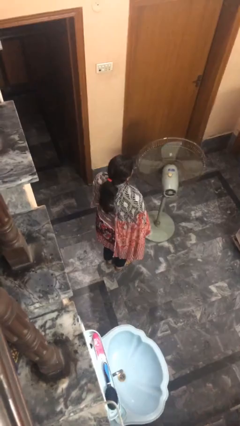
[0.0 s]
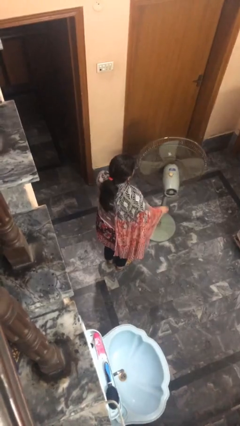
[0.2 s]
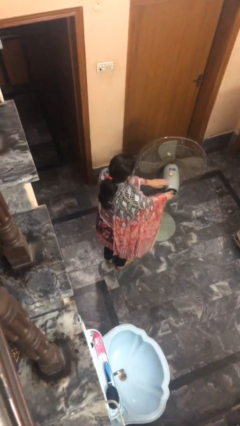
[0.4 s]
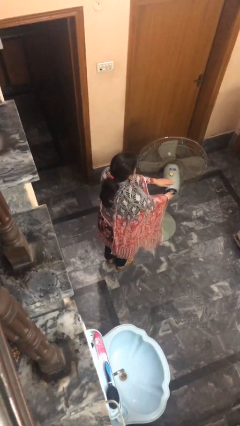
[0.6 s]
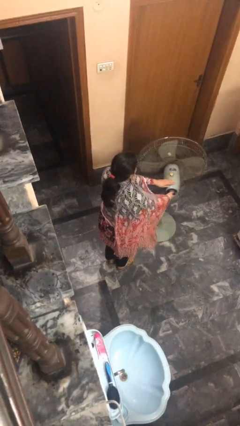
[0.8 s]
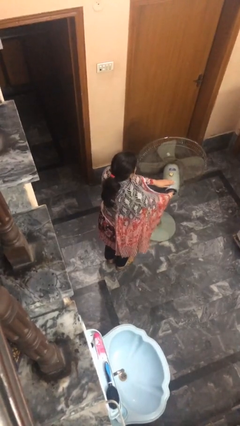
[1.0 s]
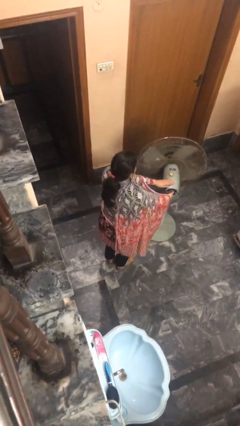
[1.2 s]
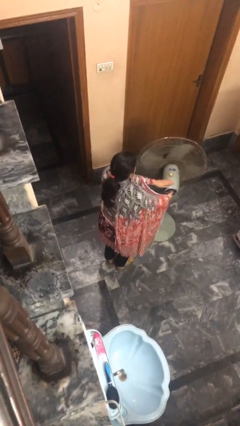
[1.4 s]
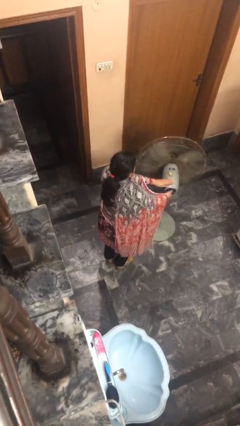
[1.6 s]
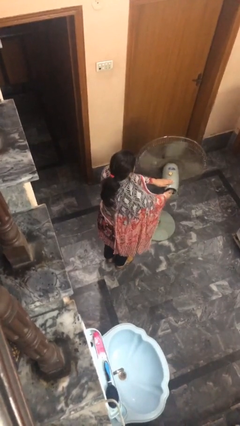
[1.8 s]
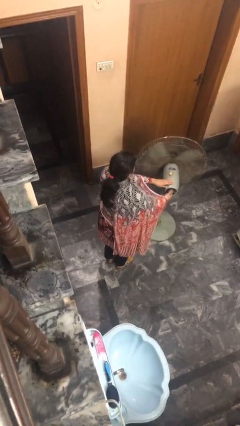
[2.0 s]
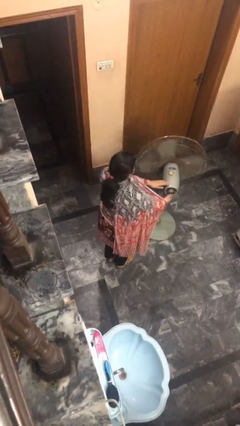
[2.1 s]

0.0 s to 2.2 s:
person turns on fan

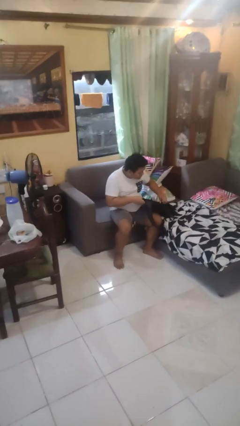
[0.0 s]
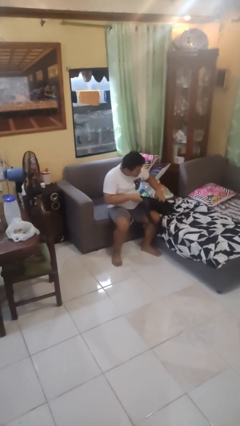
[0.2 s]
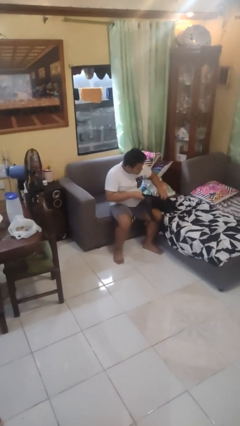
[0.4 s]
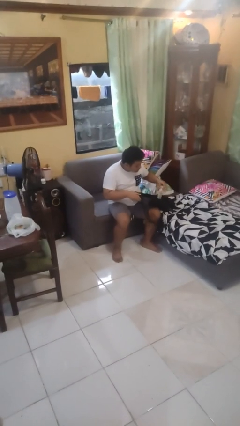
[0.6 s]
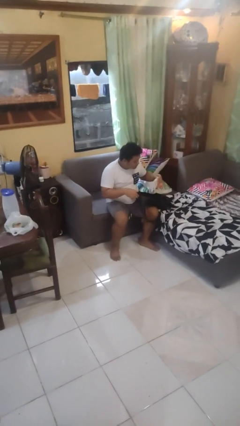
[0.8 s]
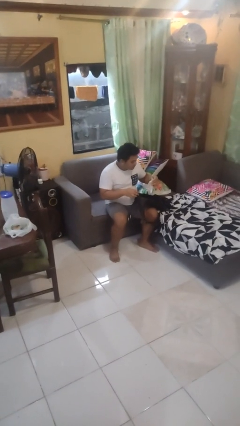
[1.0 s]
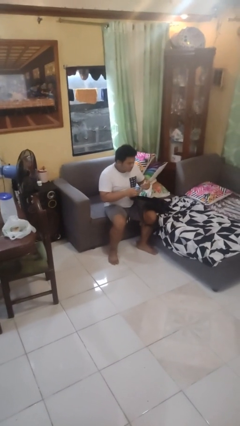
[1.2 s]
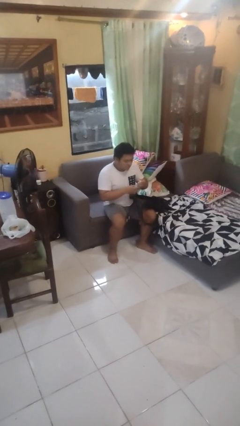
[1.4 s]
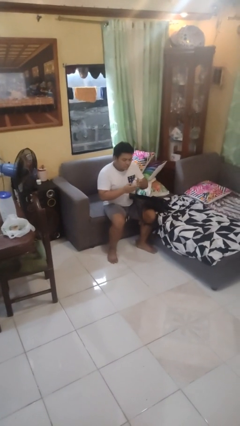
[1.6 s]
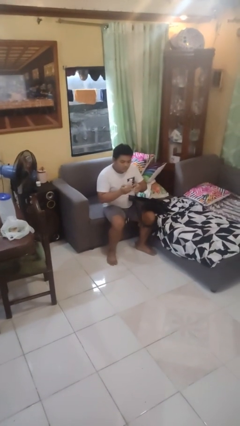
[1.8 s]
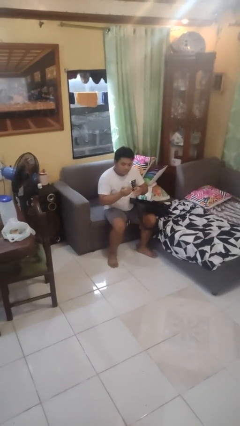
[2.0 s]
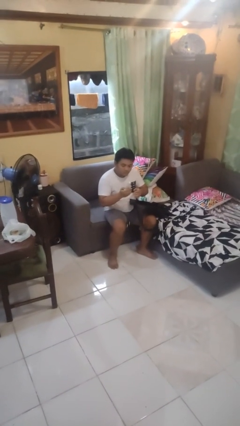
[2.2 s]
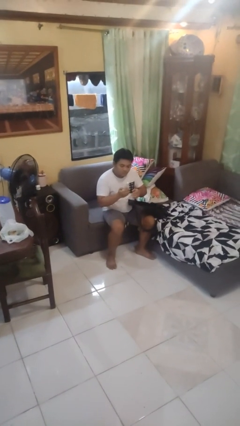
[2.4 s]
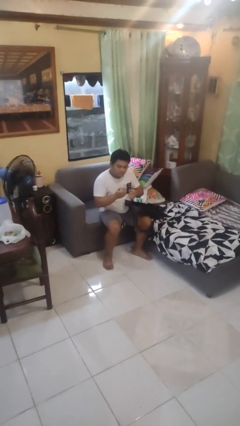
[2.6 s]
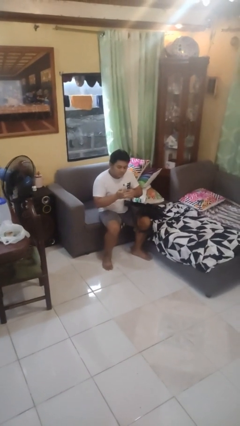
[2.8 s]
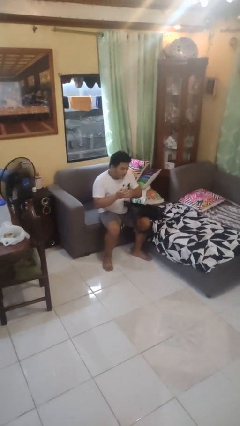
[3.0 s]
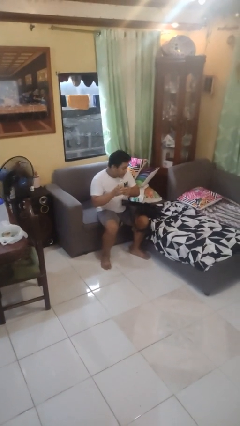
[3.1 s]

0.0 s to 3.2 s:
person takes object from backpack

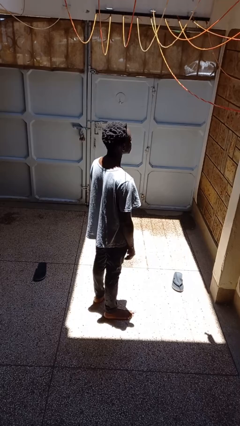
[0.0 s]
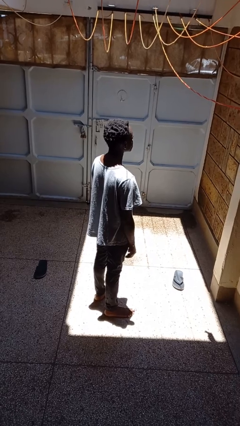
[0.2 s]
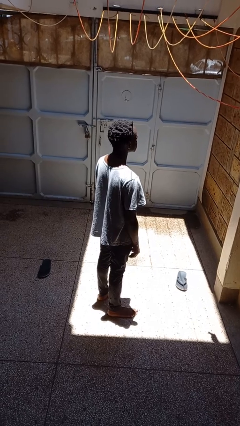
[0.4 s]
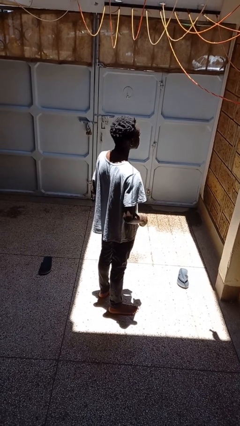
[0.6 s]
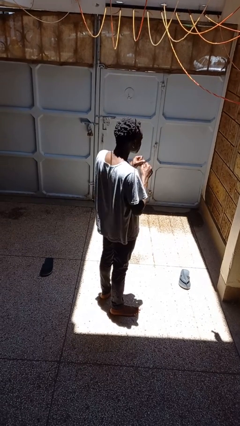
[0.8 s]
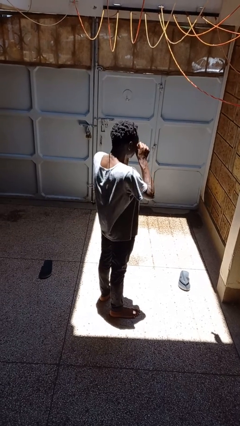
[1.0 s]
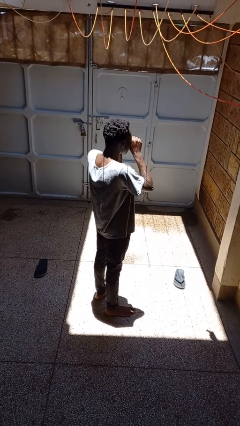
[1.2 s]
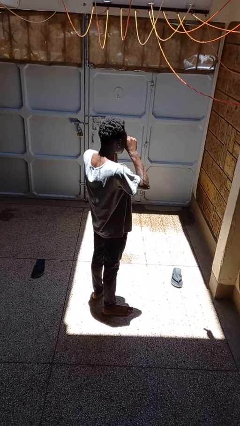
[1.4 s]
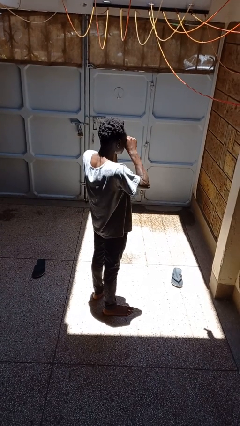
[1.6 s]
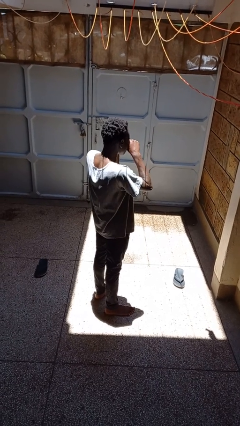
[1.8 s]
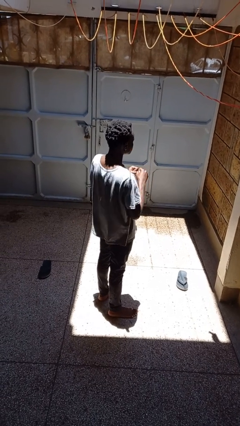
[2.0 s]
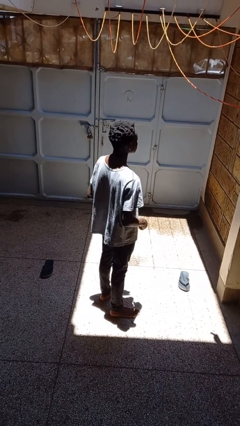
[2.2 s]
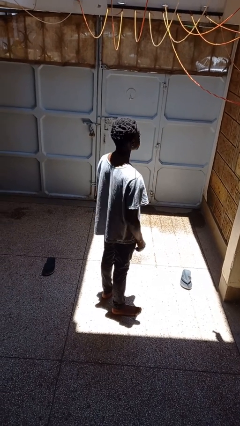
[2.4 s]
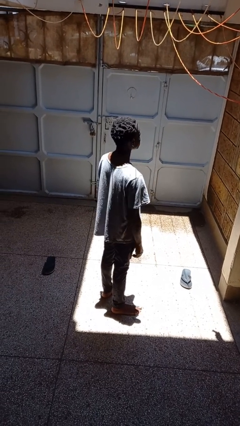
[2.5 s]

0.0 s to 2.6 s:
person rubs eyes

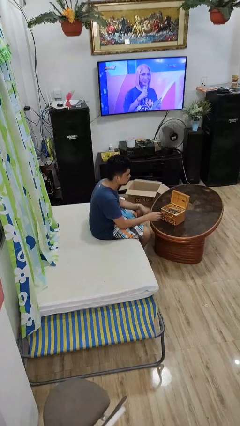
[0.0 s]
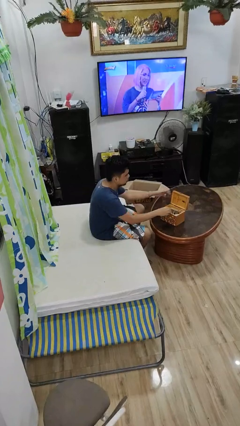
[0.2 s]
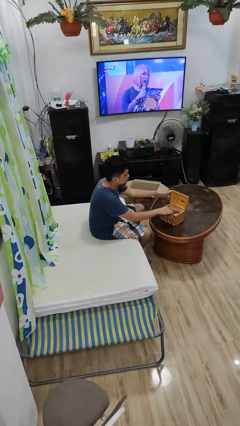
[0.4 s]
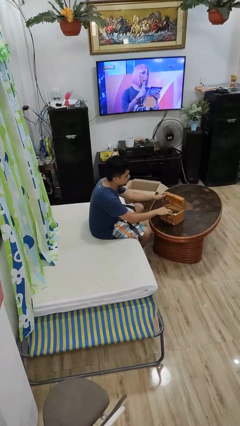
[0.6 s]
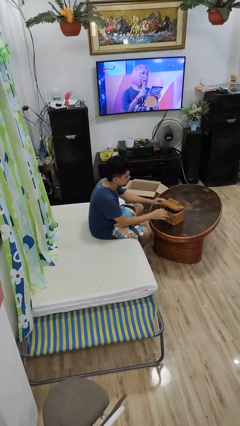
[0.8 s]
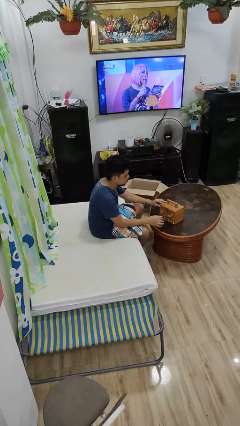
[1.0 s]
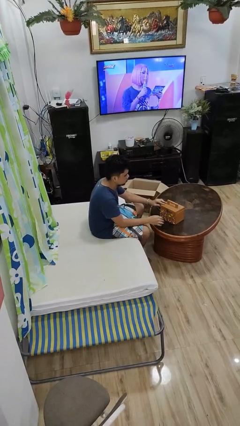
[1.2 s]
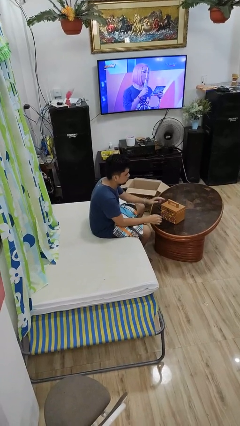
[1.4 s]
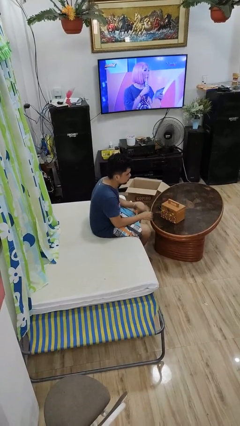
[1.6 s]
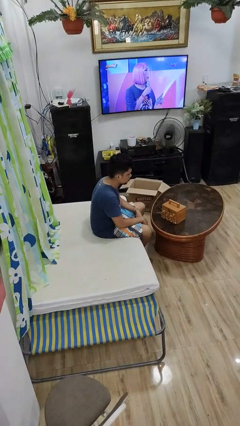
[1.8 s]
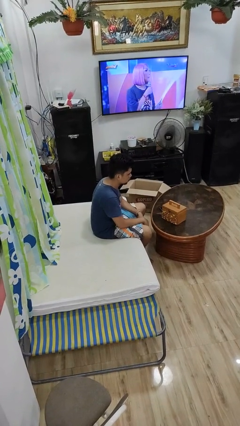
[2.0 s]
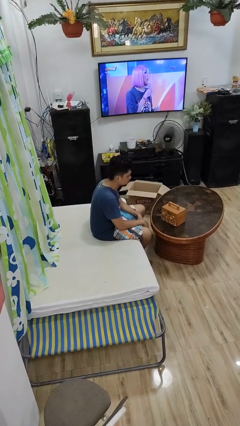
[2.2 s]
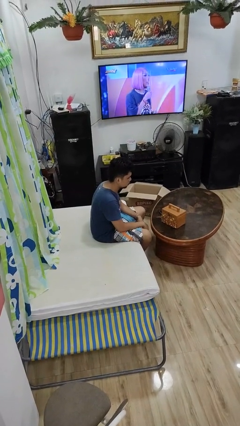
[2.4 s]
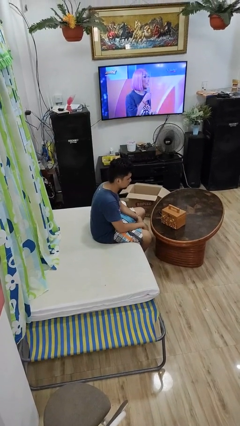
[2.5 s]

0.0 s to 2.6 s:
person closes jewelry box

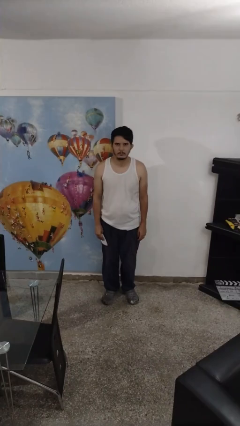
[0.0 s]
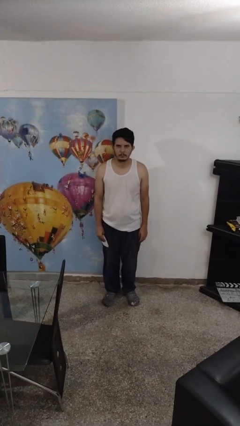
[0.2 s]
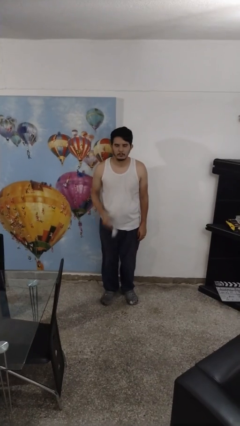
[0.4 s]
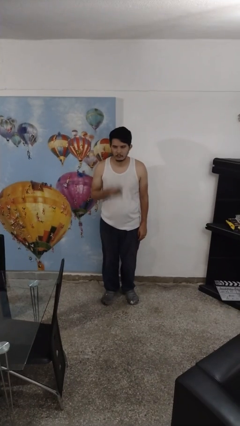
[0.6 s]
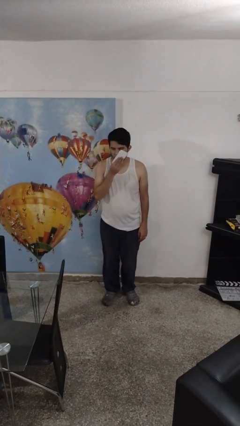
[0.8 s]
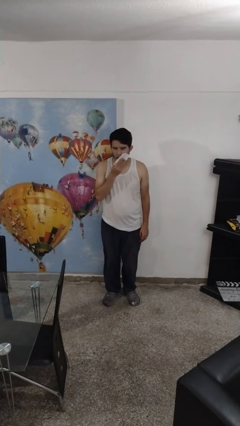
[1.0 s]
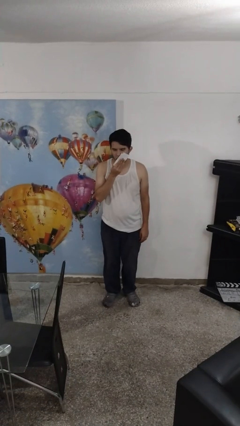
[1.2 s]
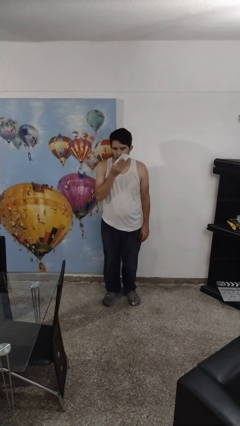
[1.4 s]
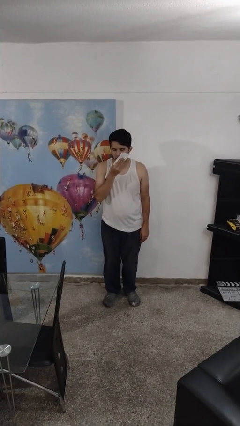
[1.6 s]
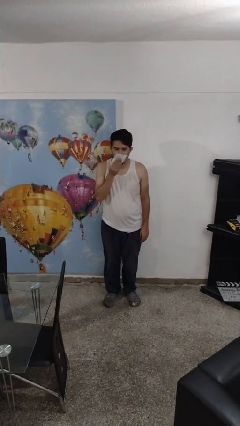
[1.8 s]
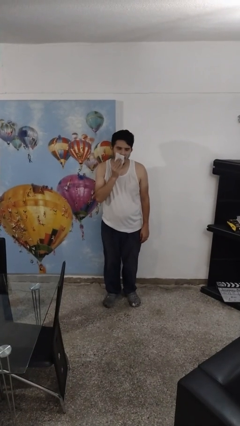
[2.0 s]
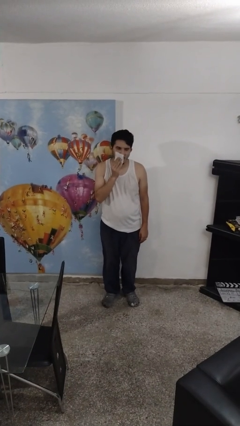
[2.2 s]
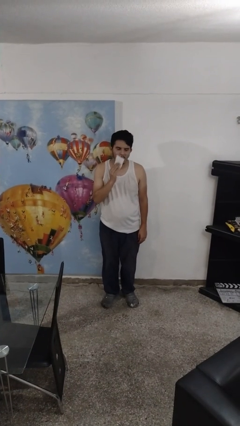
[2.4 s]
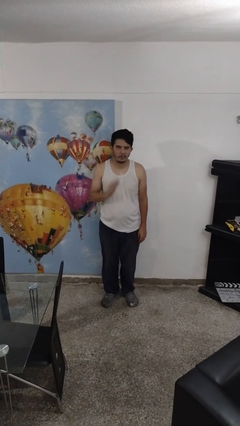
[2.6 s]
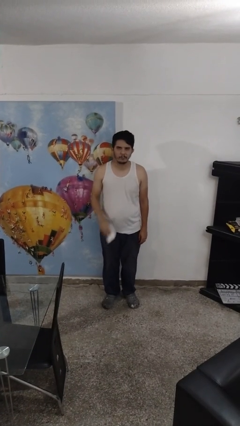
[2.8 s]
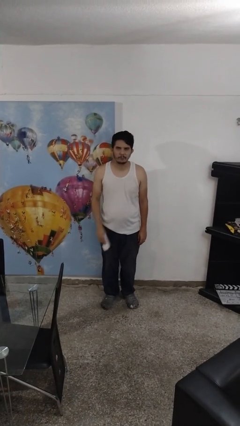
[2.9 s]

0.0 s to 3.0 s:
person wipes mouth with napkin

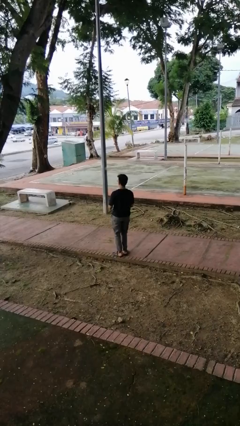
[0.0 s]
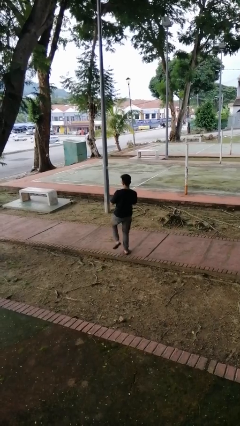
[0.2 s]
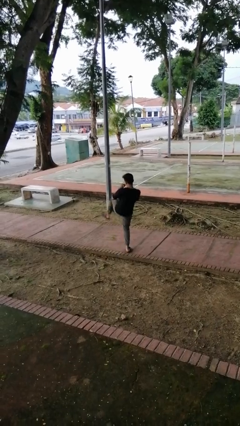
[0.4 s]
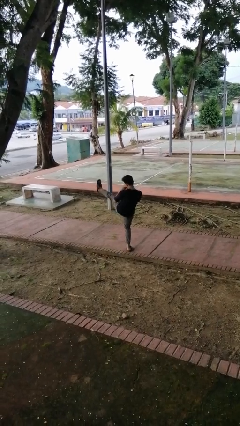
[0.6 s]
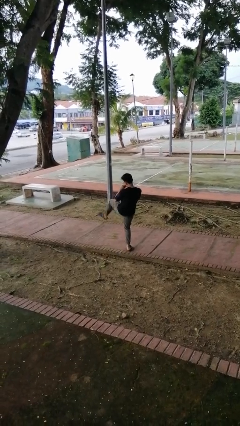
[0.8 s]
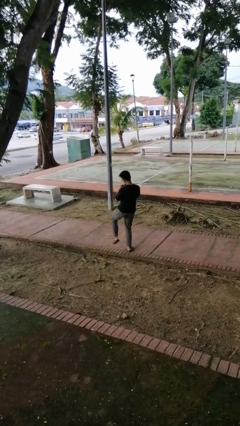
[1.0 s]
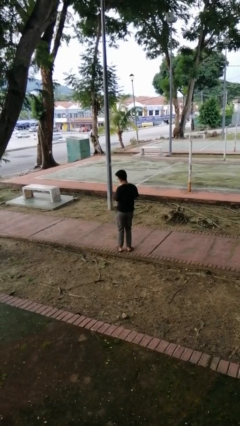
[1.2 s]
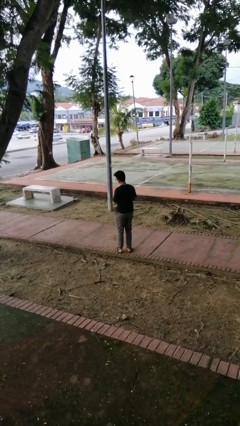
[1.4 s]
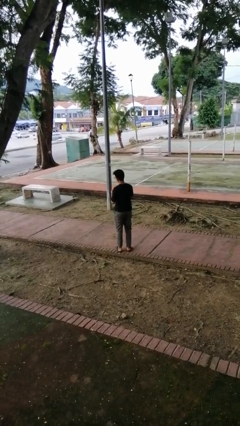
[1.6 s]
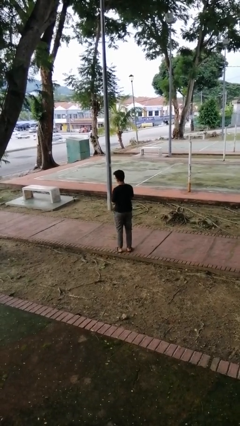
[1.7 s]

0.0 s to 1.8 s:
person karate kicks

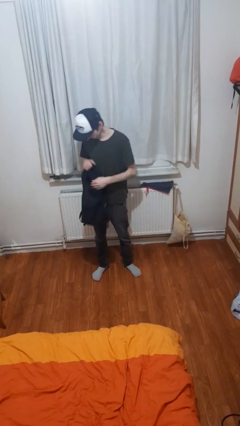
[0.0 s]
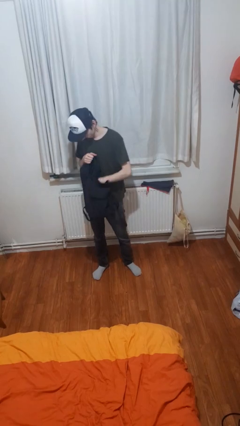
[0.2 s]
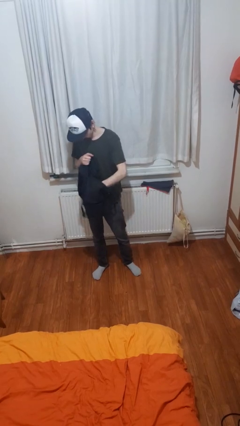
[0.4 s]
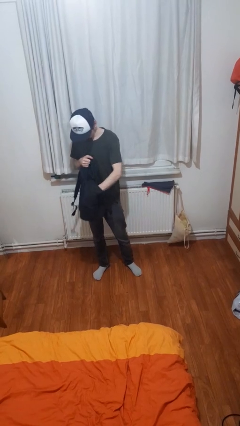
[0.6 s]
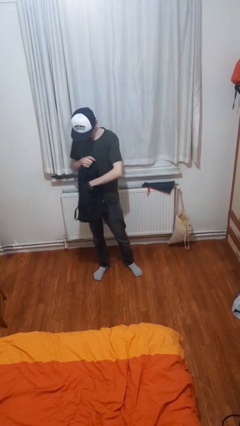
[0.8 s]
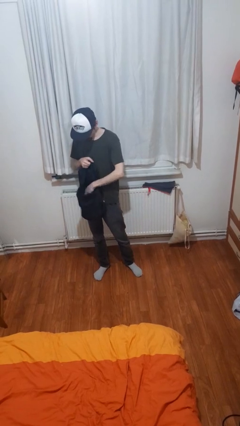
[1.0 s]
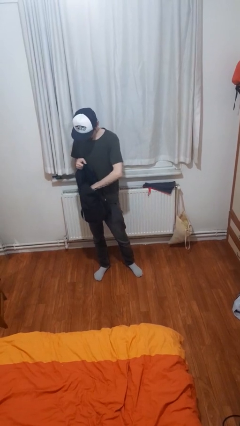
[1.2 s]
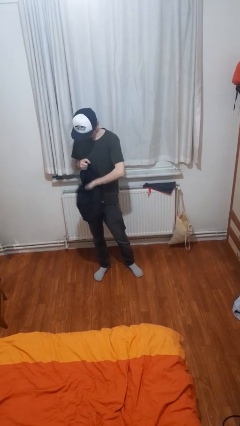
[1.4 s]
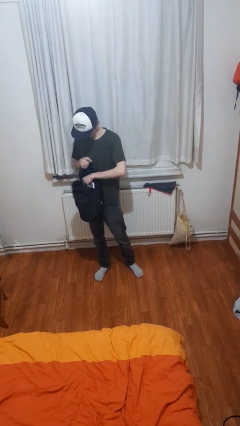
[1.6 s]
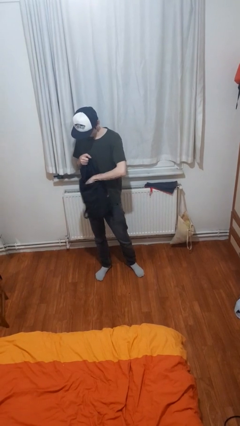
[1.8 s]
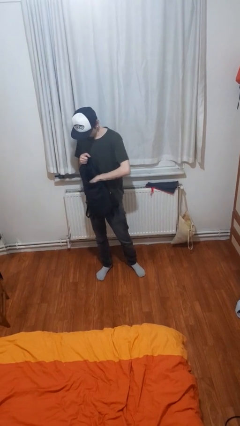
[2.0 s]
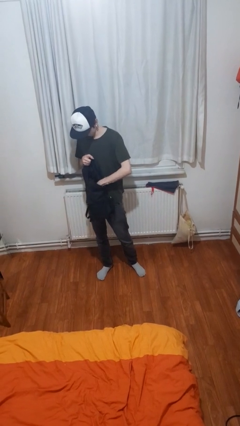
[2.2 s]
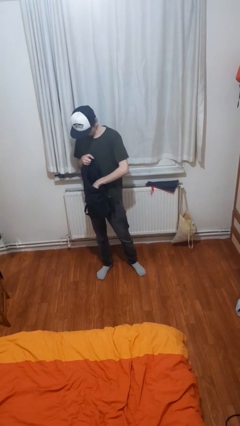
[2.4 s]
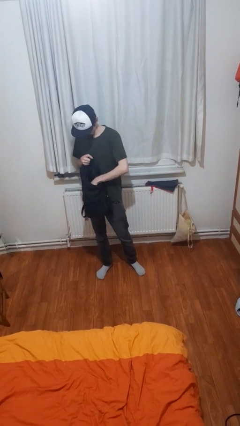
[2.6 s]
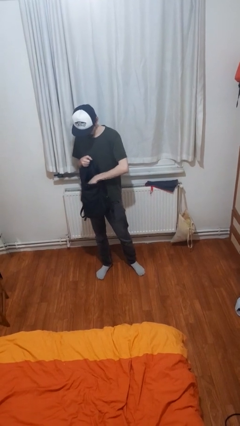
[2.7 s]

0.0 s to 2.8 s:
person searches in backpack
